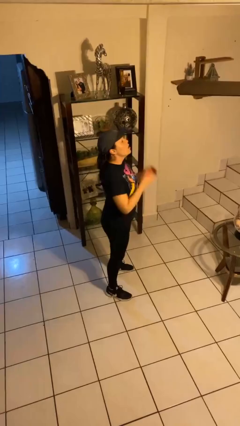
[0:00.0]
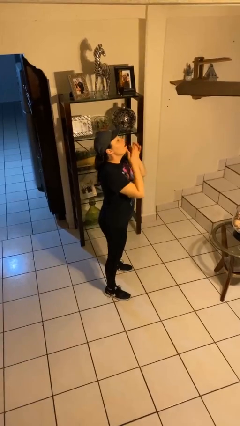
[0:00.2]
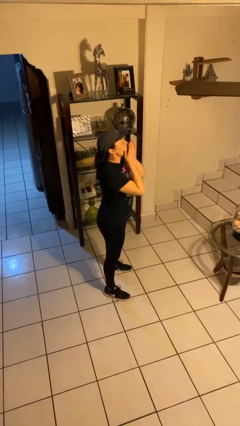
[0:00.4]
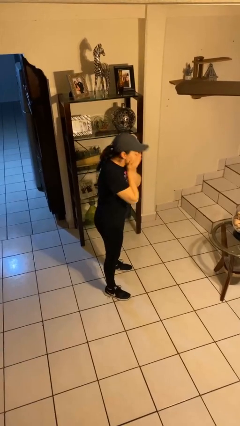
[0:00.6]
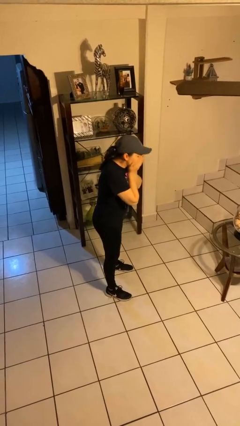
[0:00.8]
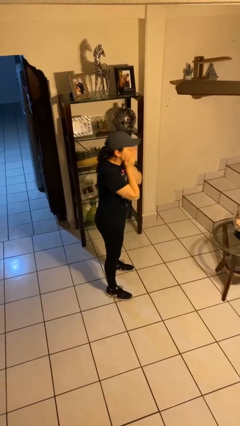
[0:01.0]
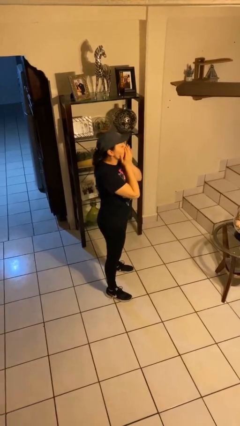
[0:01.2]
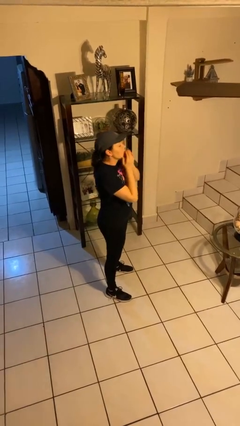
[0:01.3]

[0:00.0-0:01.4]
person sneezes into hand

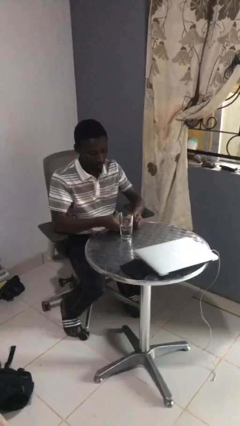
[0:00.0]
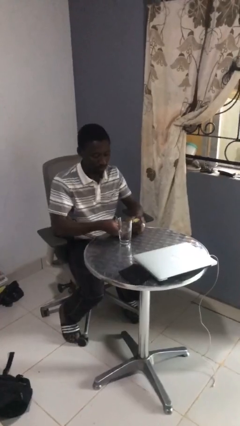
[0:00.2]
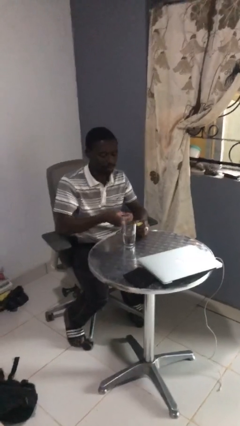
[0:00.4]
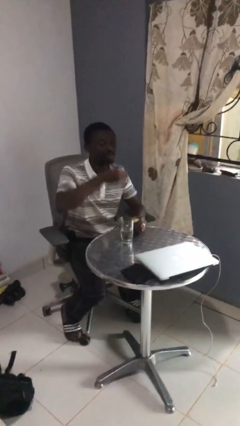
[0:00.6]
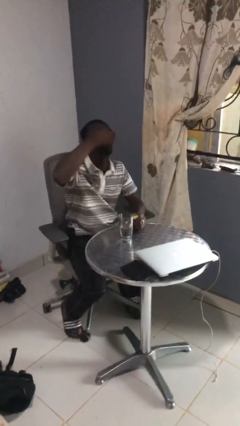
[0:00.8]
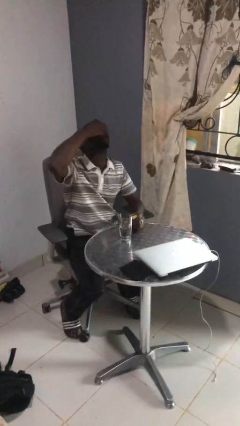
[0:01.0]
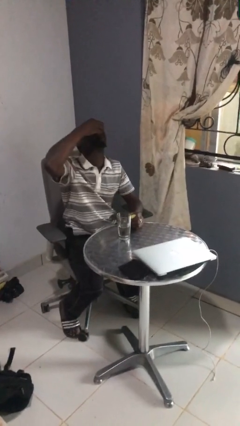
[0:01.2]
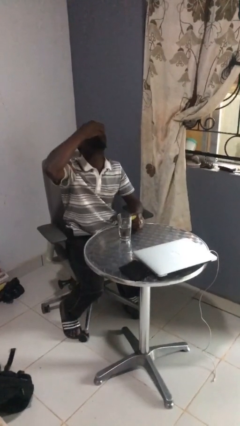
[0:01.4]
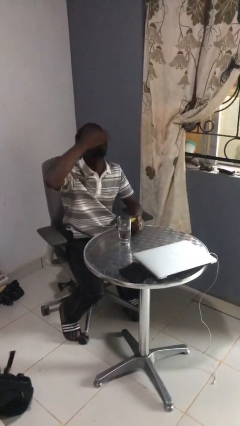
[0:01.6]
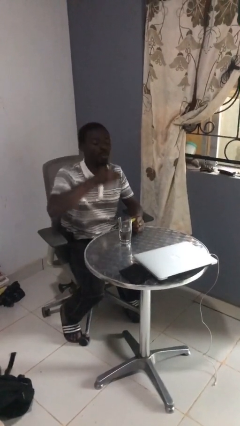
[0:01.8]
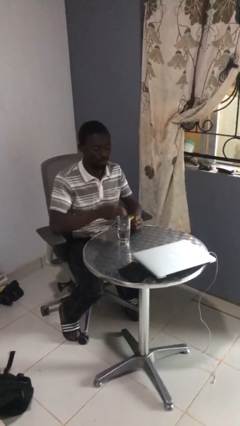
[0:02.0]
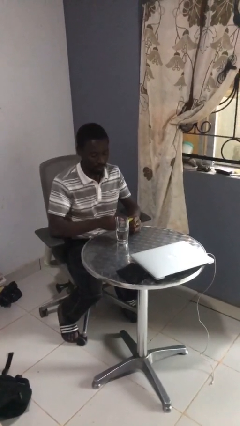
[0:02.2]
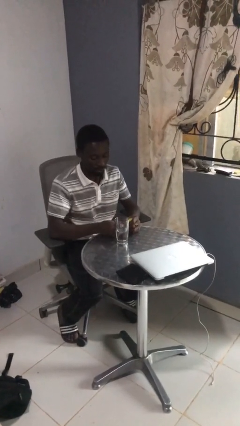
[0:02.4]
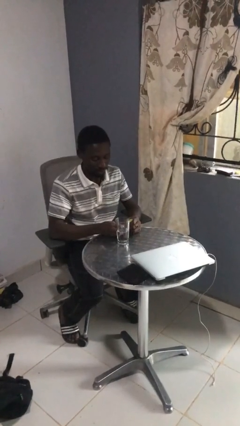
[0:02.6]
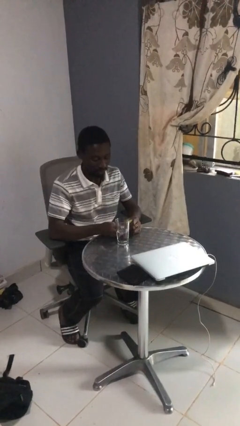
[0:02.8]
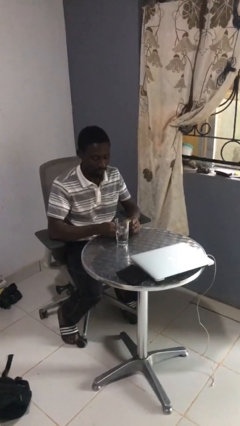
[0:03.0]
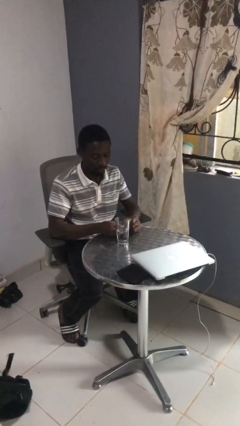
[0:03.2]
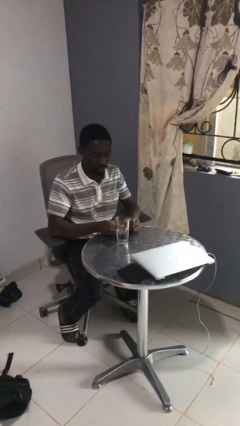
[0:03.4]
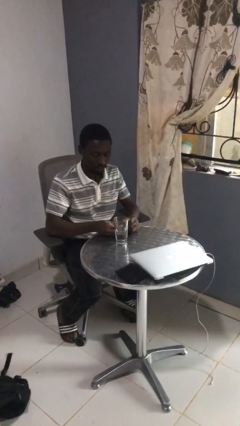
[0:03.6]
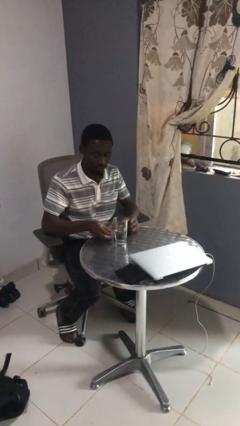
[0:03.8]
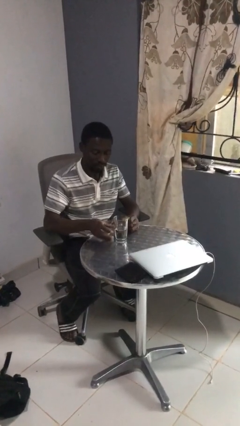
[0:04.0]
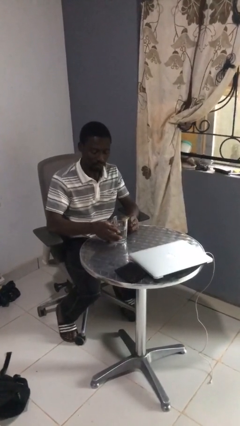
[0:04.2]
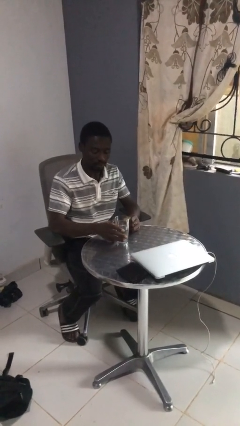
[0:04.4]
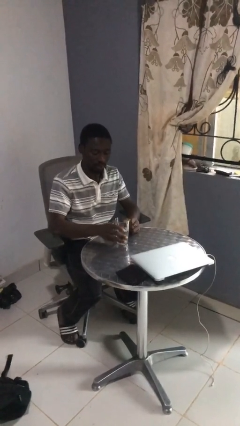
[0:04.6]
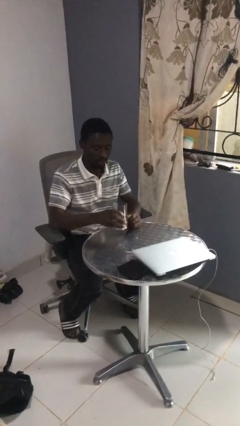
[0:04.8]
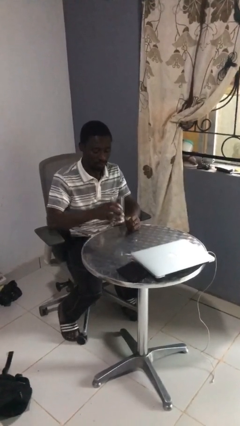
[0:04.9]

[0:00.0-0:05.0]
person takes medicine pills

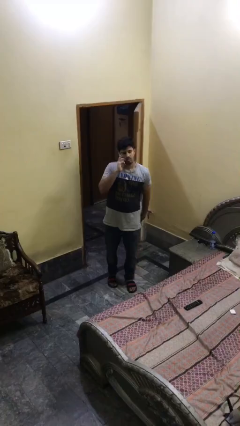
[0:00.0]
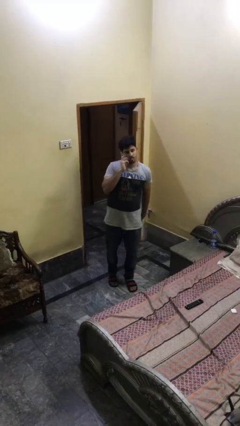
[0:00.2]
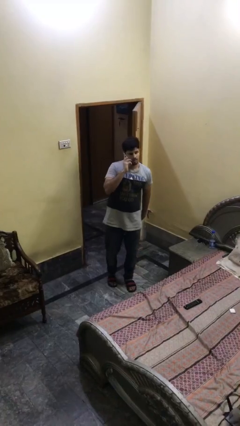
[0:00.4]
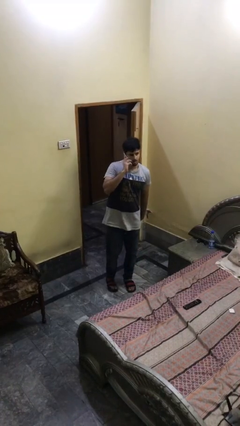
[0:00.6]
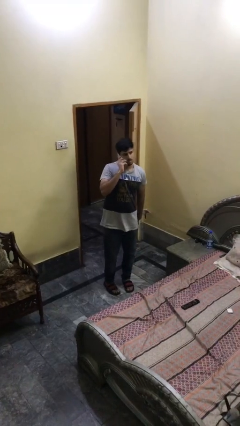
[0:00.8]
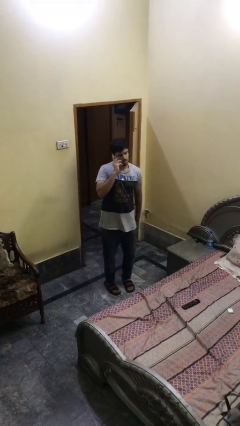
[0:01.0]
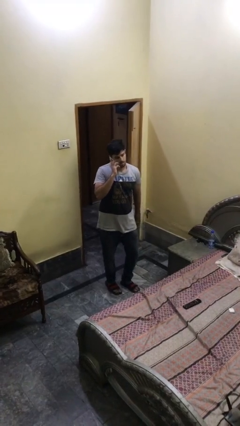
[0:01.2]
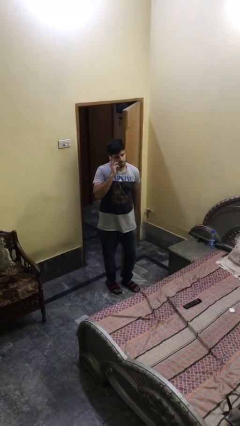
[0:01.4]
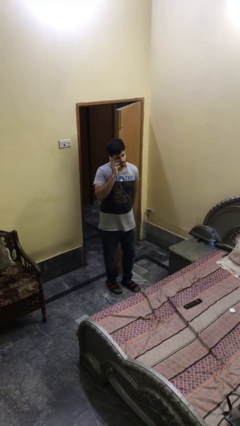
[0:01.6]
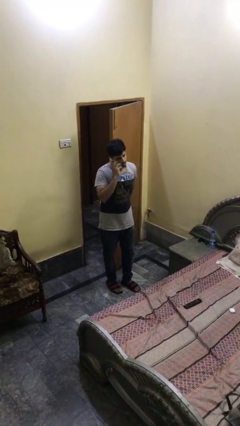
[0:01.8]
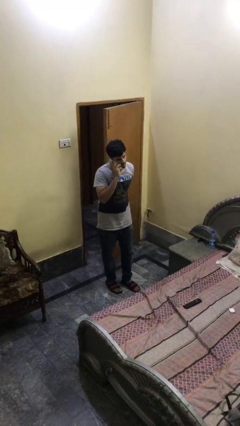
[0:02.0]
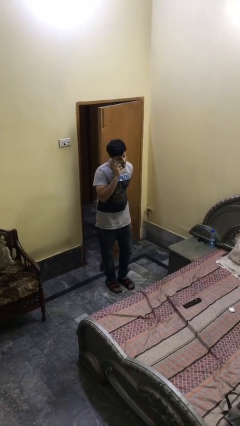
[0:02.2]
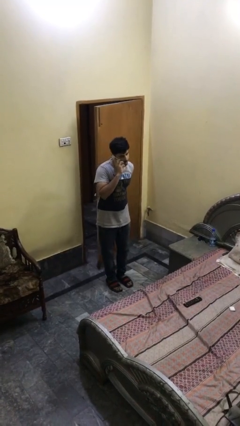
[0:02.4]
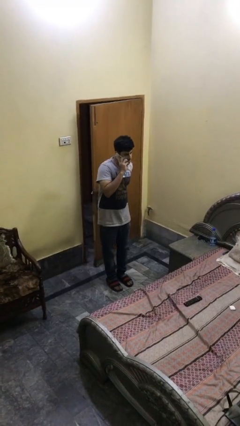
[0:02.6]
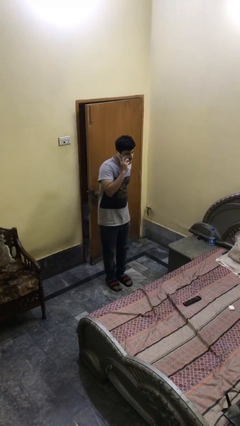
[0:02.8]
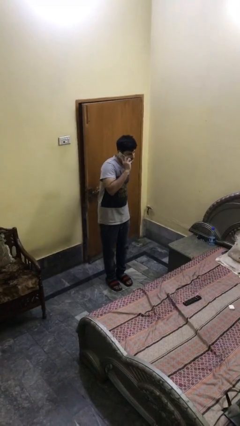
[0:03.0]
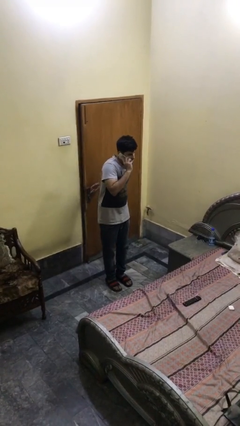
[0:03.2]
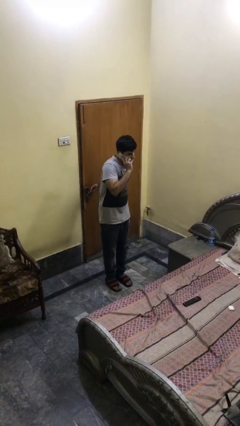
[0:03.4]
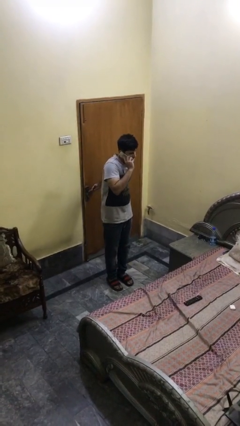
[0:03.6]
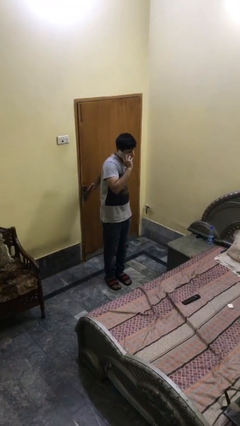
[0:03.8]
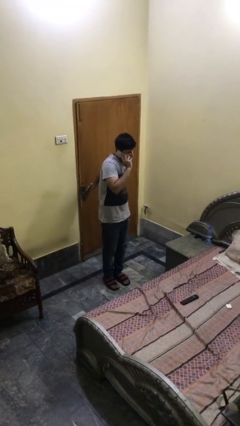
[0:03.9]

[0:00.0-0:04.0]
person closes facility door

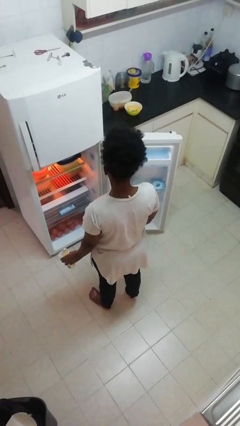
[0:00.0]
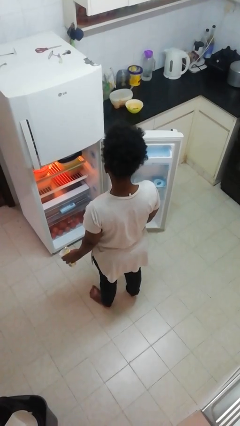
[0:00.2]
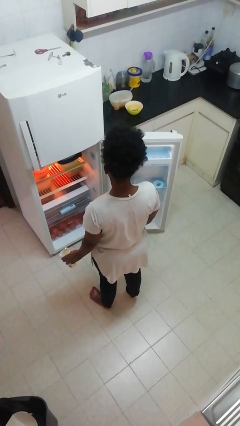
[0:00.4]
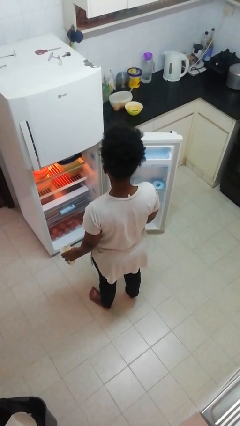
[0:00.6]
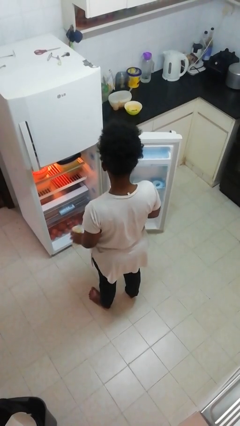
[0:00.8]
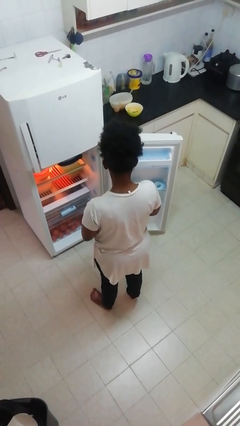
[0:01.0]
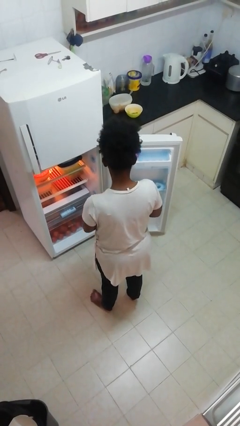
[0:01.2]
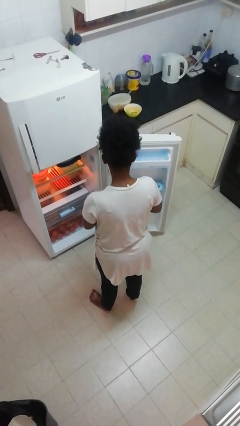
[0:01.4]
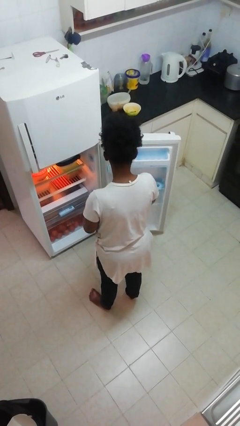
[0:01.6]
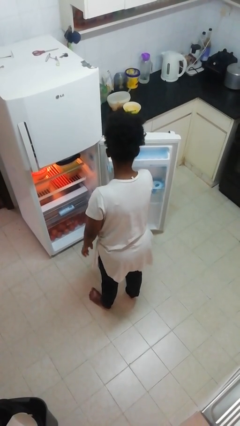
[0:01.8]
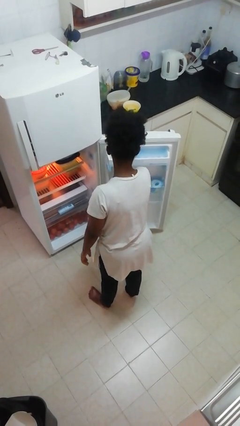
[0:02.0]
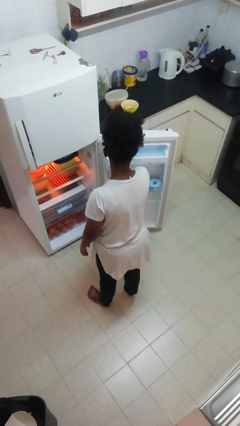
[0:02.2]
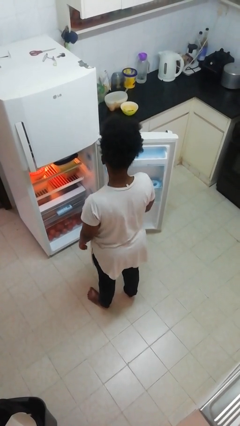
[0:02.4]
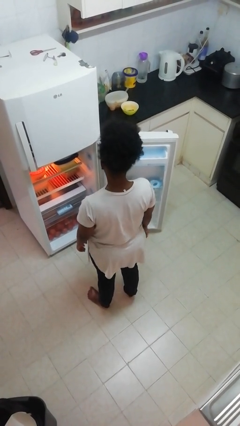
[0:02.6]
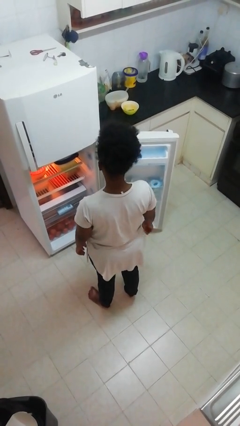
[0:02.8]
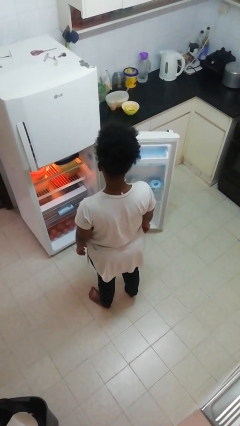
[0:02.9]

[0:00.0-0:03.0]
person puts object into refrigerator

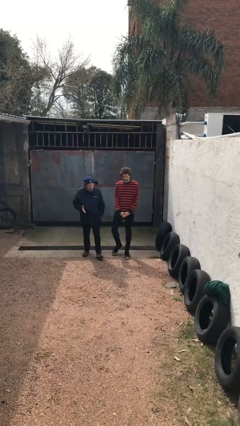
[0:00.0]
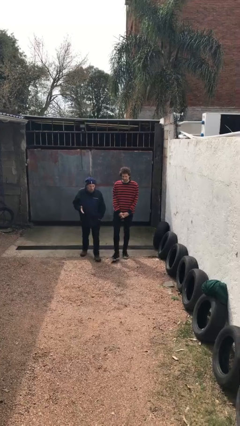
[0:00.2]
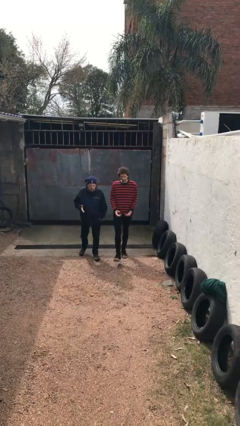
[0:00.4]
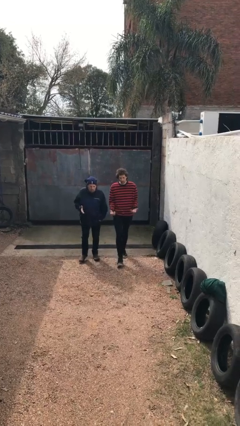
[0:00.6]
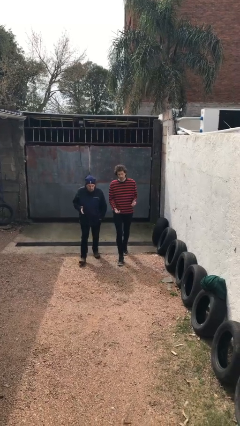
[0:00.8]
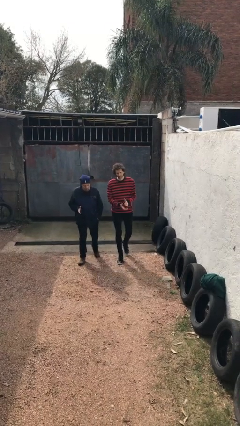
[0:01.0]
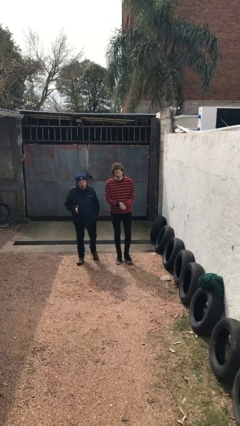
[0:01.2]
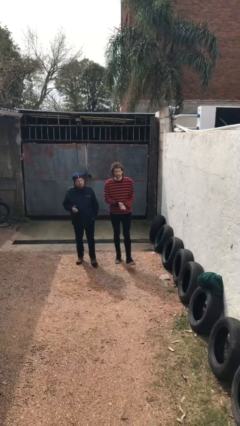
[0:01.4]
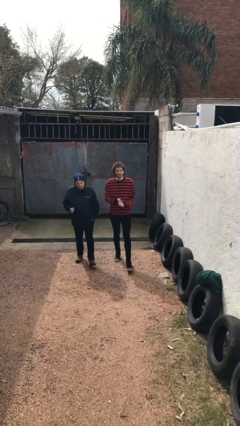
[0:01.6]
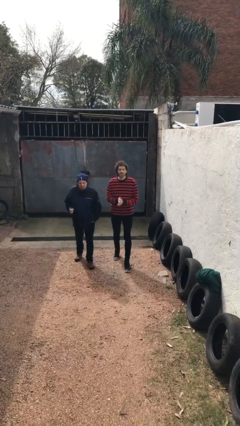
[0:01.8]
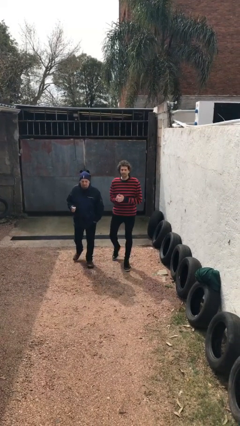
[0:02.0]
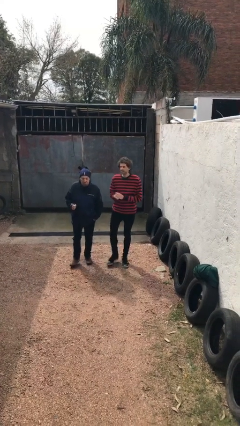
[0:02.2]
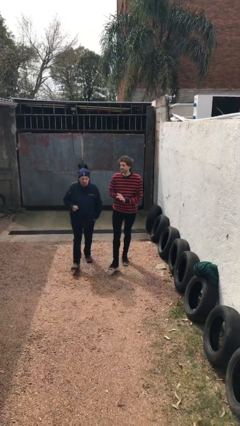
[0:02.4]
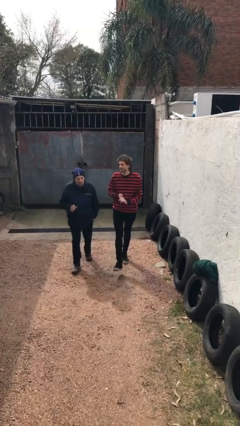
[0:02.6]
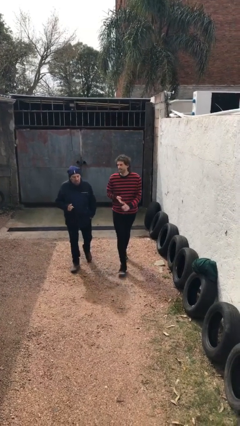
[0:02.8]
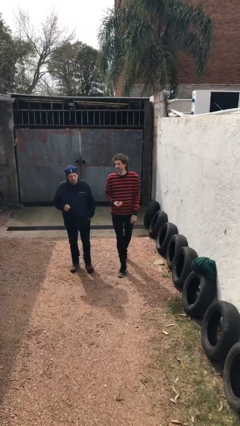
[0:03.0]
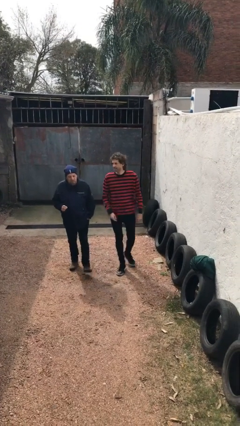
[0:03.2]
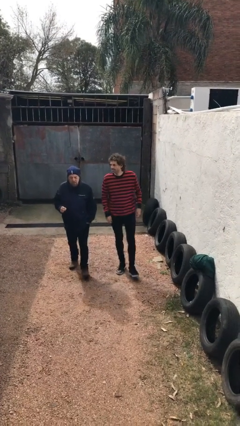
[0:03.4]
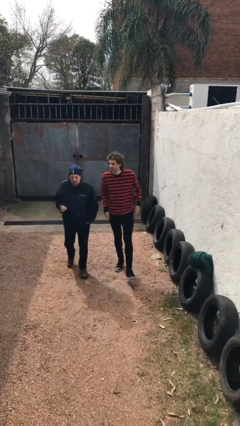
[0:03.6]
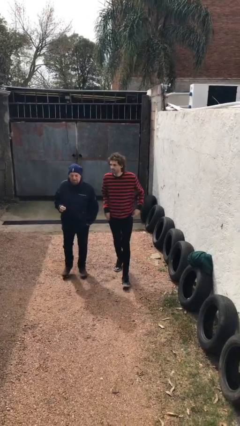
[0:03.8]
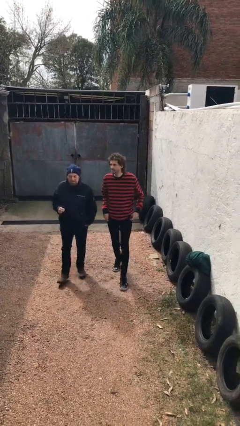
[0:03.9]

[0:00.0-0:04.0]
person talks to person

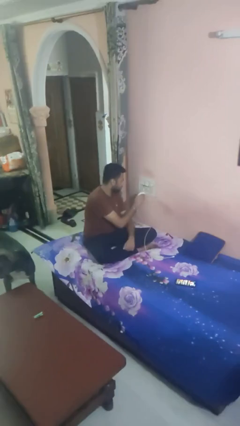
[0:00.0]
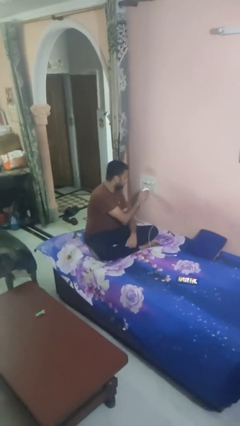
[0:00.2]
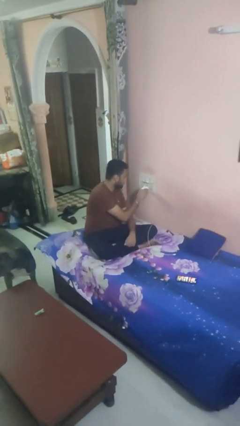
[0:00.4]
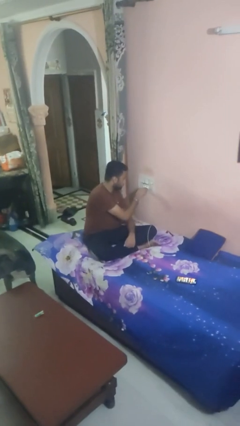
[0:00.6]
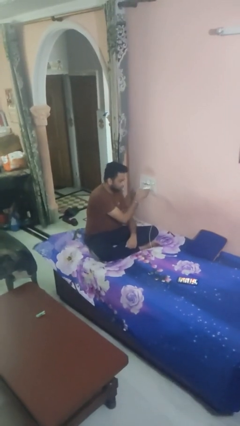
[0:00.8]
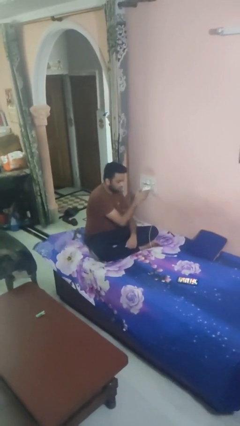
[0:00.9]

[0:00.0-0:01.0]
person plugs into electrical socket
